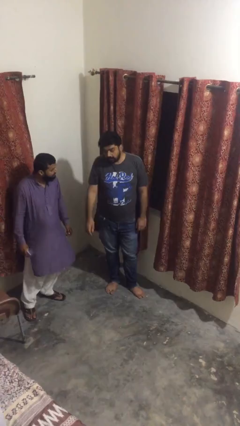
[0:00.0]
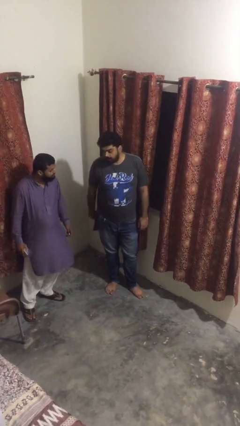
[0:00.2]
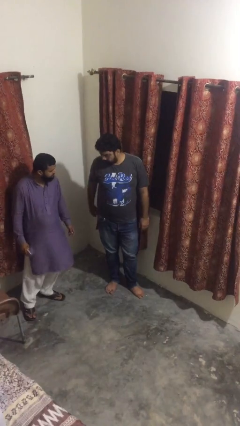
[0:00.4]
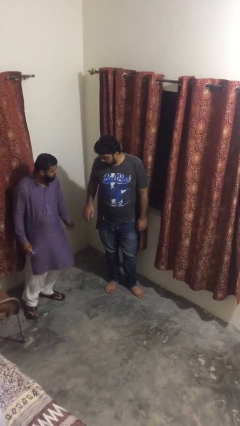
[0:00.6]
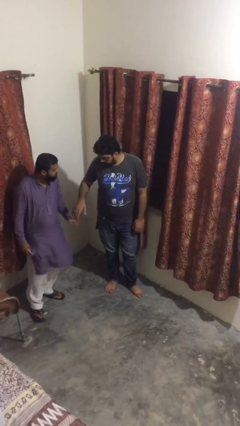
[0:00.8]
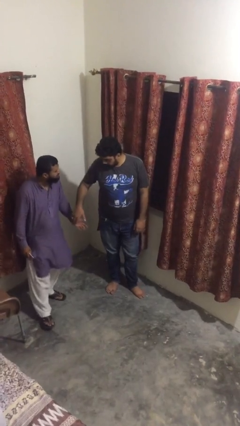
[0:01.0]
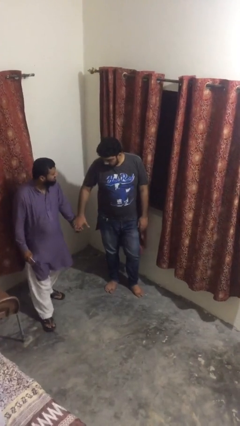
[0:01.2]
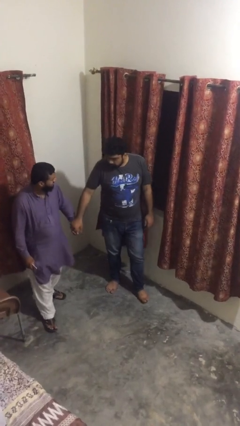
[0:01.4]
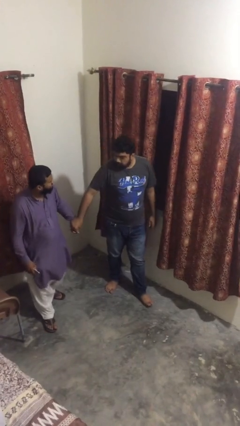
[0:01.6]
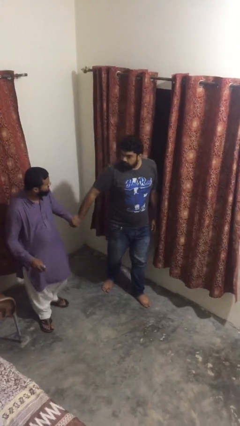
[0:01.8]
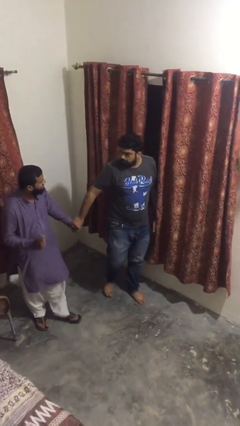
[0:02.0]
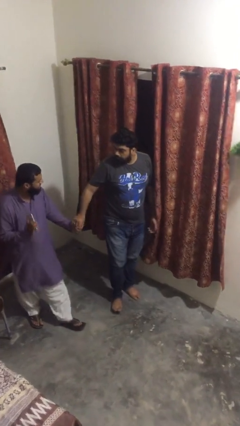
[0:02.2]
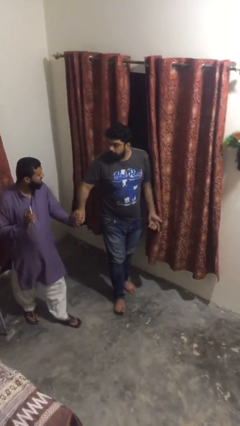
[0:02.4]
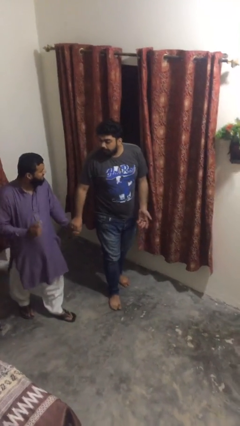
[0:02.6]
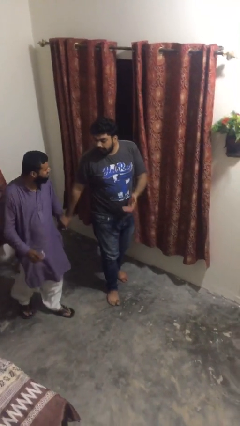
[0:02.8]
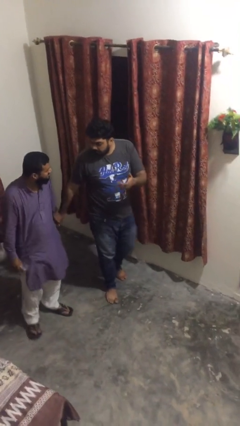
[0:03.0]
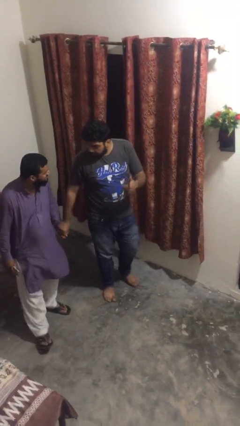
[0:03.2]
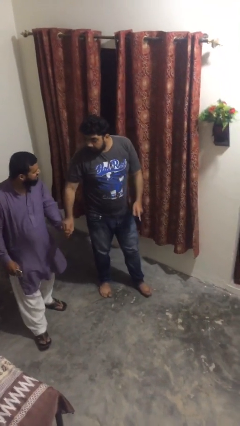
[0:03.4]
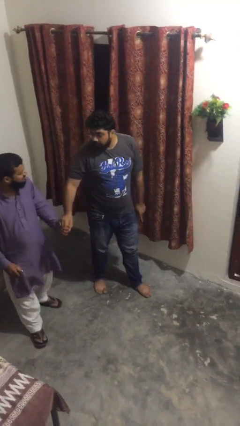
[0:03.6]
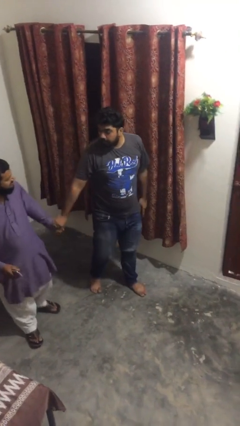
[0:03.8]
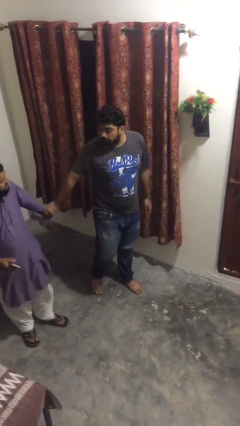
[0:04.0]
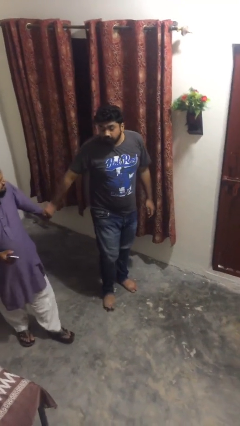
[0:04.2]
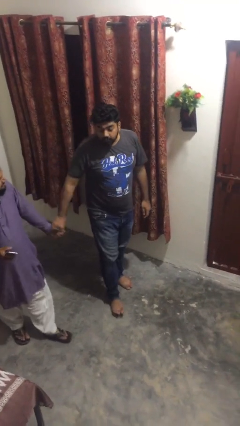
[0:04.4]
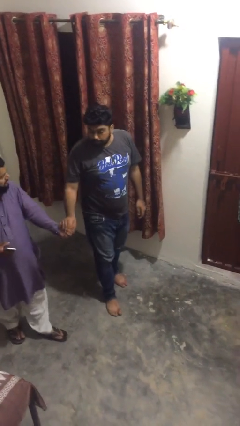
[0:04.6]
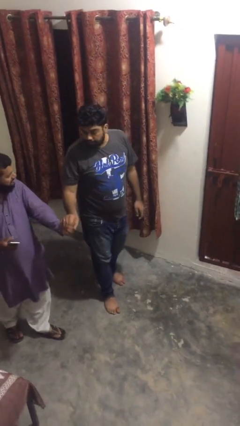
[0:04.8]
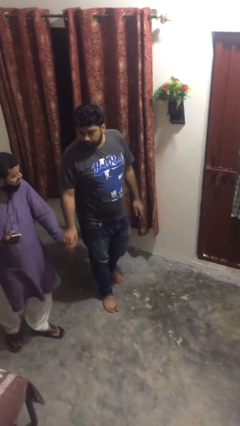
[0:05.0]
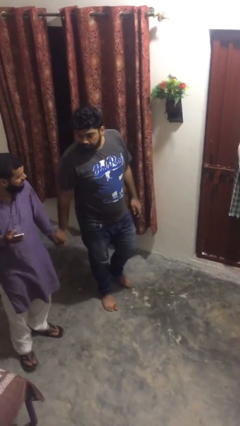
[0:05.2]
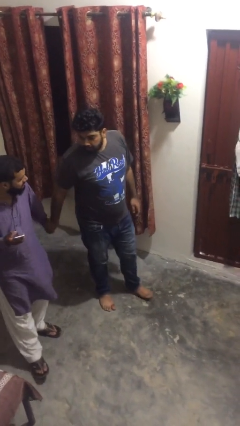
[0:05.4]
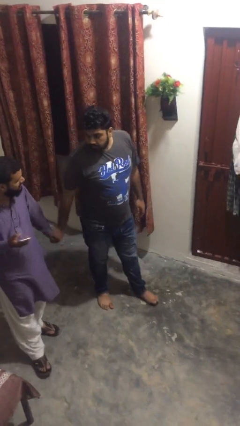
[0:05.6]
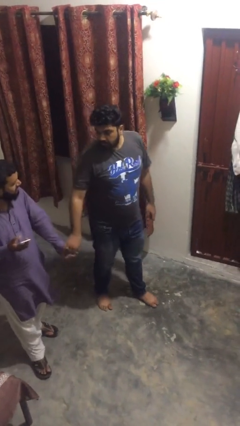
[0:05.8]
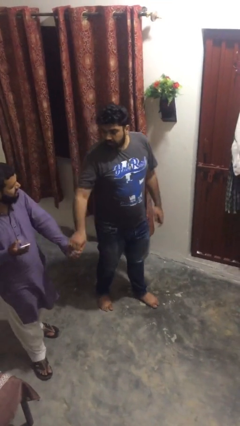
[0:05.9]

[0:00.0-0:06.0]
person holds hand

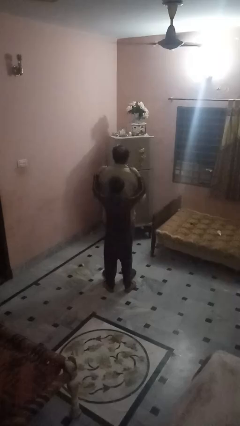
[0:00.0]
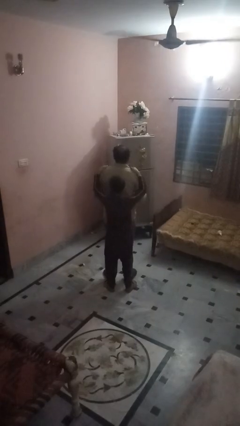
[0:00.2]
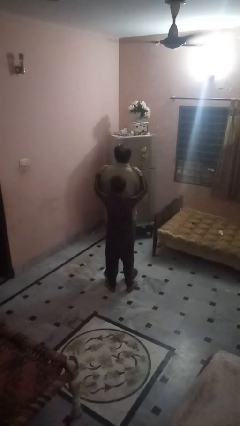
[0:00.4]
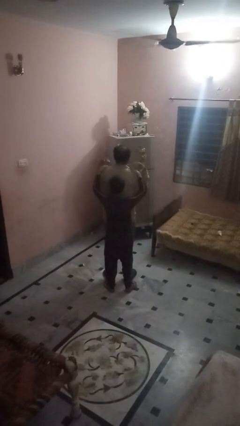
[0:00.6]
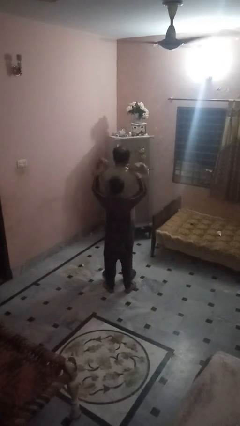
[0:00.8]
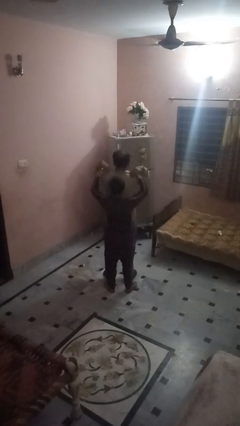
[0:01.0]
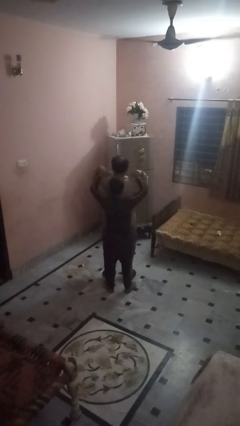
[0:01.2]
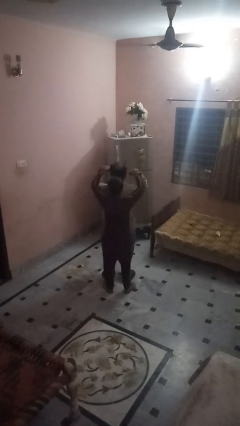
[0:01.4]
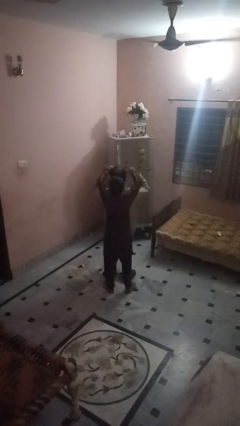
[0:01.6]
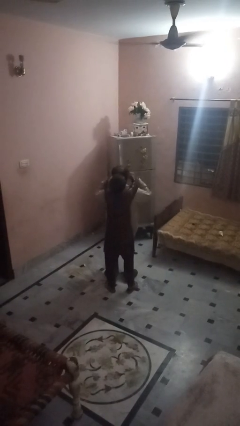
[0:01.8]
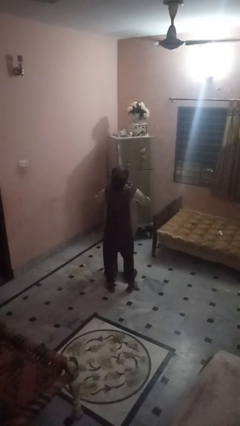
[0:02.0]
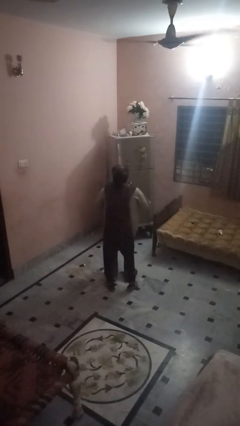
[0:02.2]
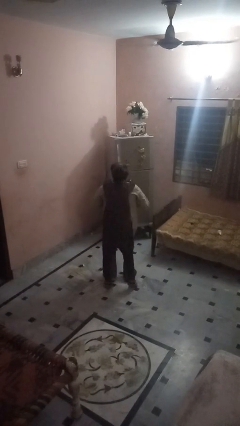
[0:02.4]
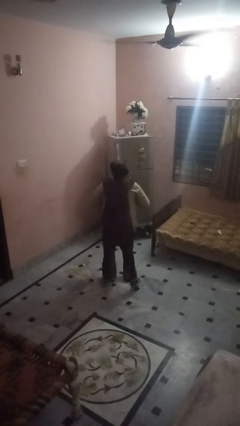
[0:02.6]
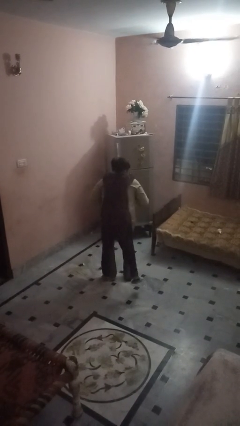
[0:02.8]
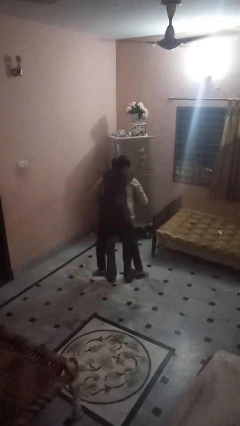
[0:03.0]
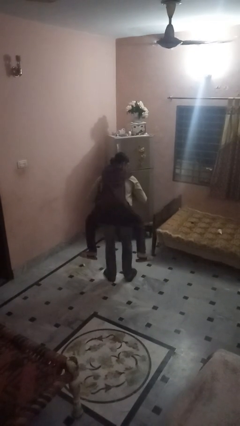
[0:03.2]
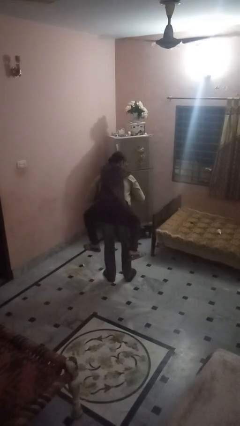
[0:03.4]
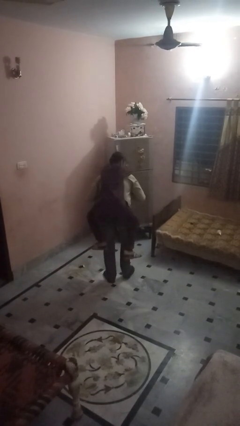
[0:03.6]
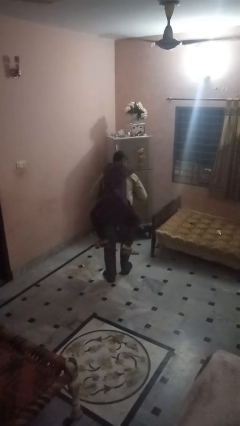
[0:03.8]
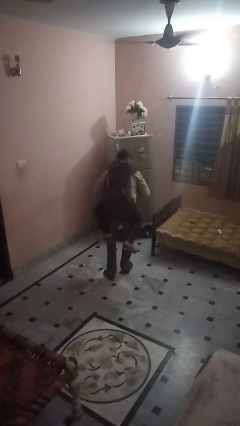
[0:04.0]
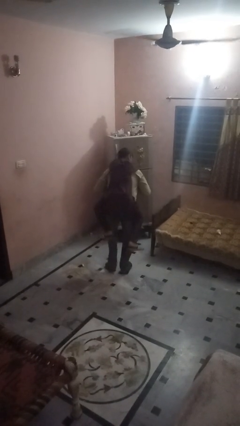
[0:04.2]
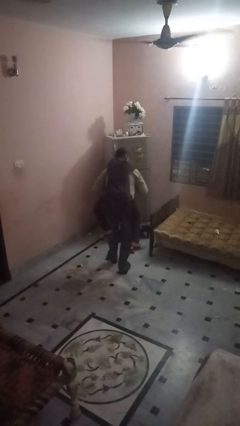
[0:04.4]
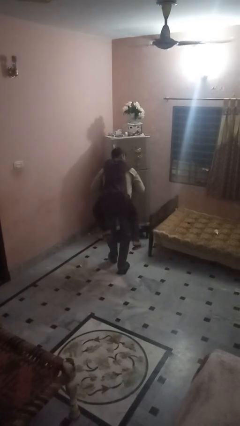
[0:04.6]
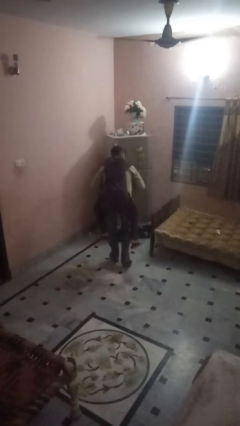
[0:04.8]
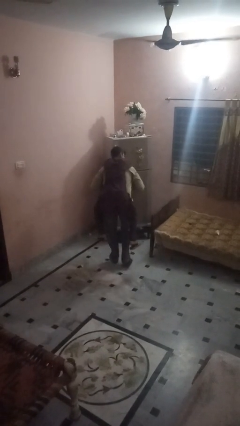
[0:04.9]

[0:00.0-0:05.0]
person carries person on back

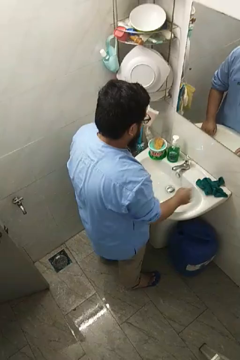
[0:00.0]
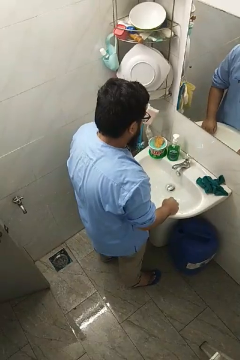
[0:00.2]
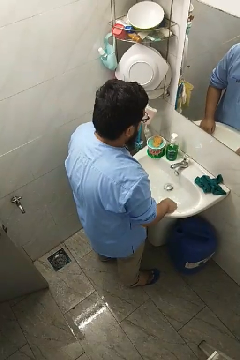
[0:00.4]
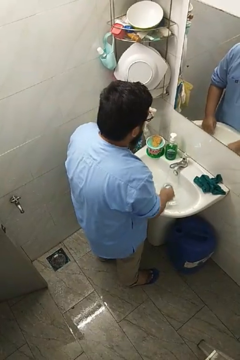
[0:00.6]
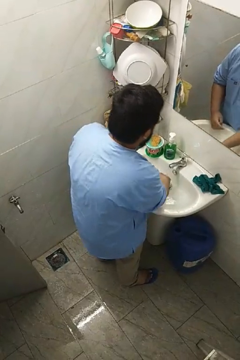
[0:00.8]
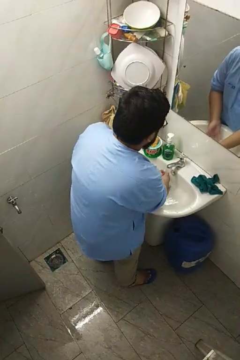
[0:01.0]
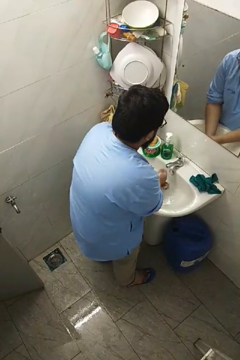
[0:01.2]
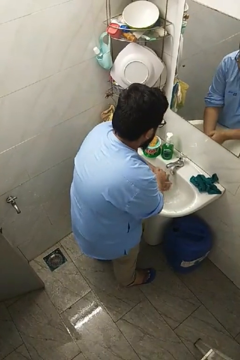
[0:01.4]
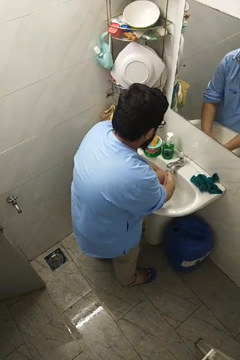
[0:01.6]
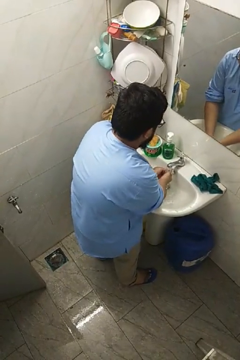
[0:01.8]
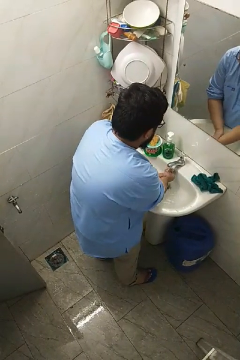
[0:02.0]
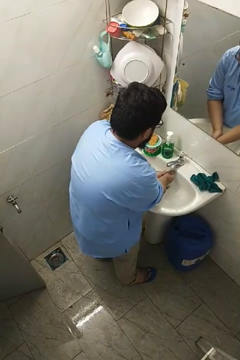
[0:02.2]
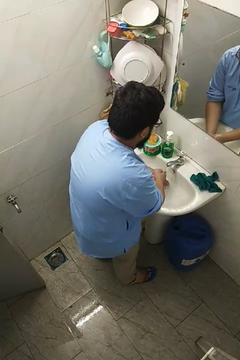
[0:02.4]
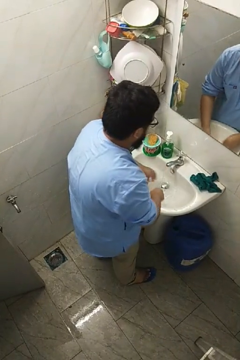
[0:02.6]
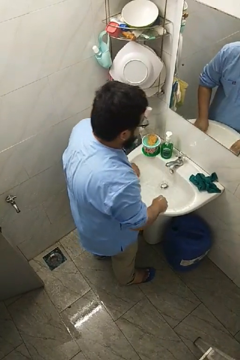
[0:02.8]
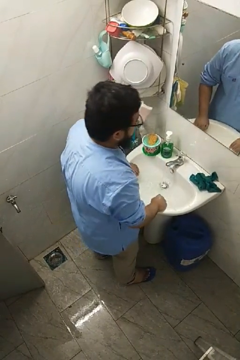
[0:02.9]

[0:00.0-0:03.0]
person washes hands

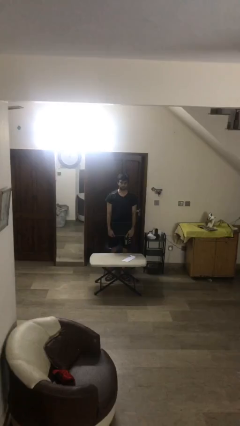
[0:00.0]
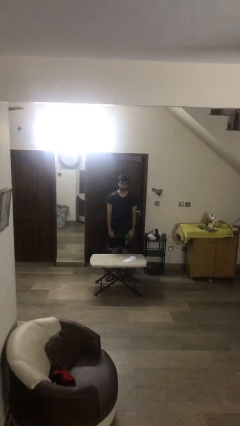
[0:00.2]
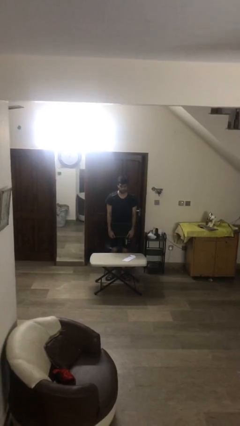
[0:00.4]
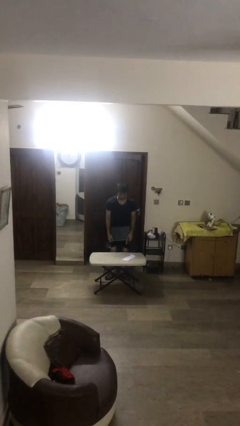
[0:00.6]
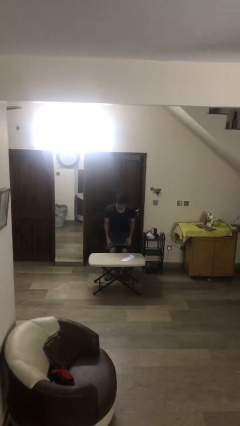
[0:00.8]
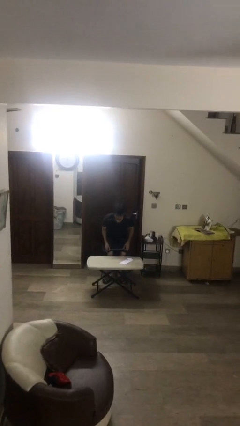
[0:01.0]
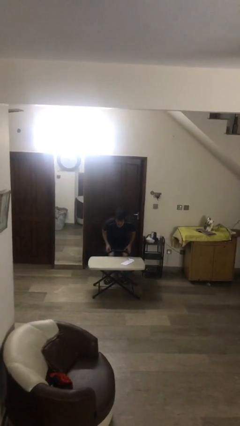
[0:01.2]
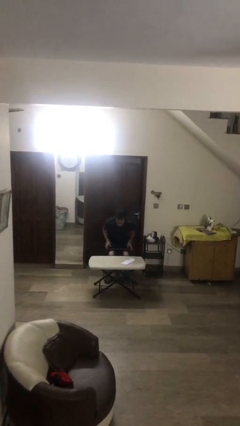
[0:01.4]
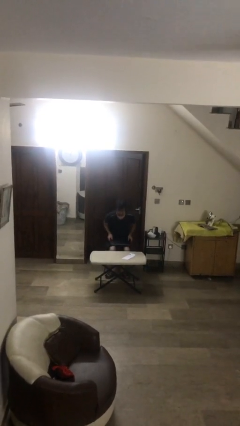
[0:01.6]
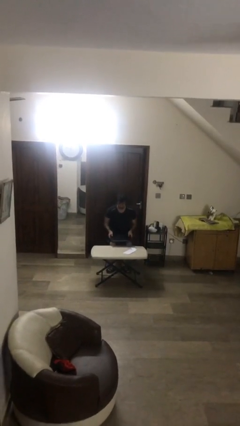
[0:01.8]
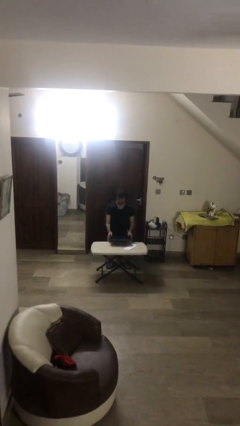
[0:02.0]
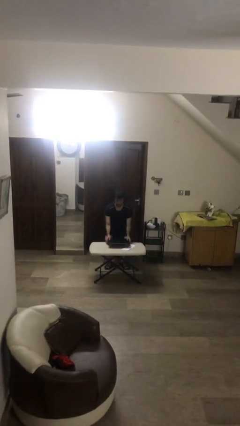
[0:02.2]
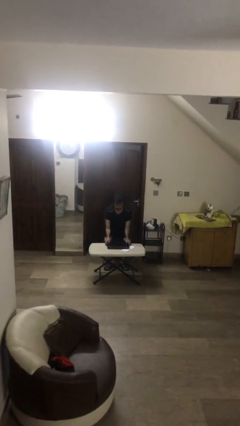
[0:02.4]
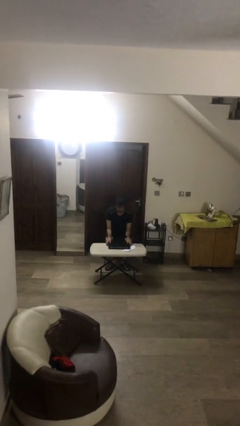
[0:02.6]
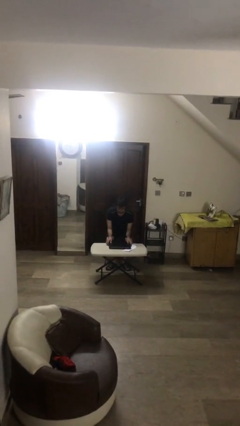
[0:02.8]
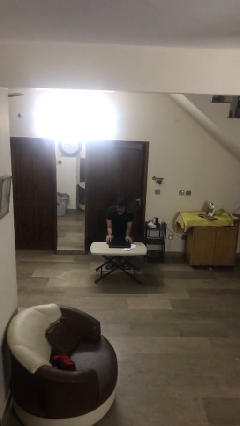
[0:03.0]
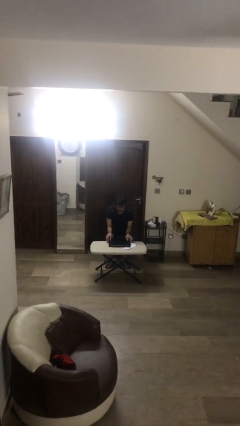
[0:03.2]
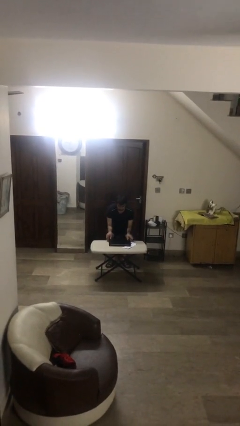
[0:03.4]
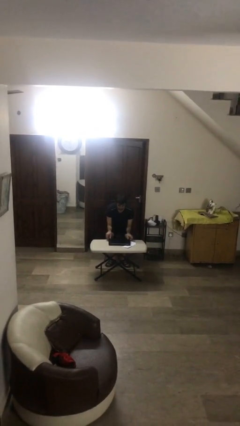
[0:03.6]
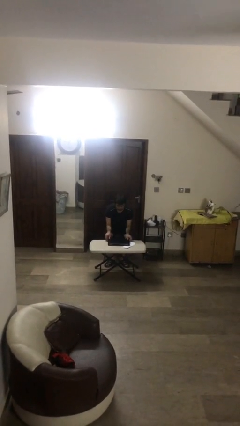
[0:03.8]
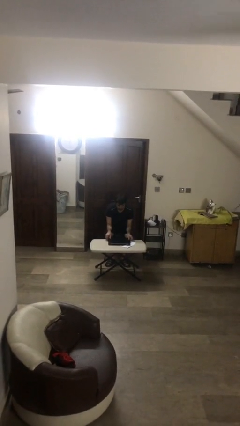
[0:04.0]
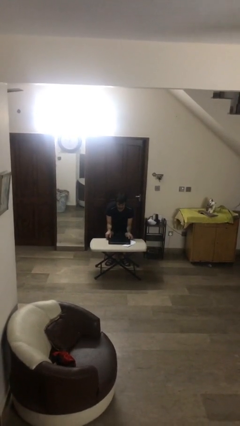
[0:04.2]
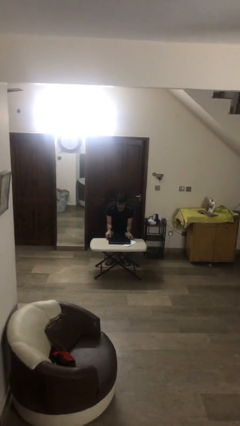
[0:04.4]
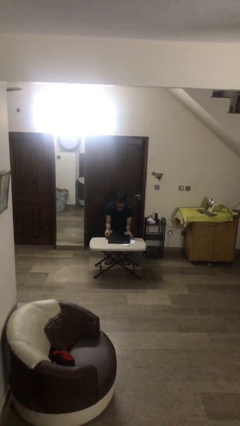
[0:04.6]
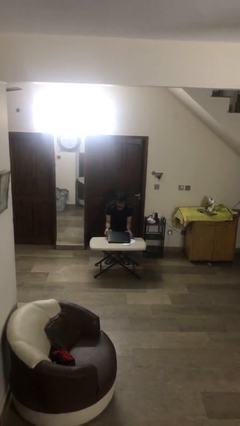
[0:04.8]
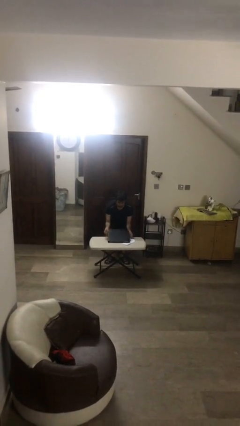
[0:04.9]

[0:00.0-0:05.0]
person sits down
